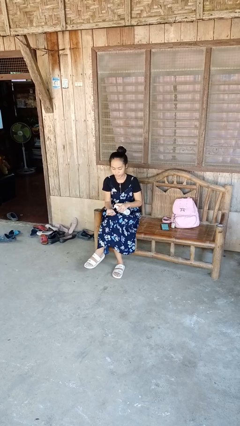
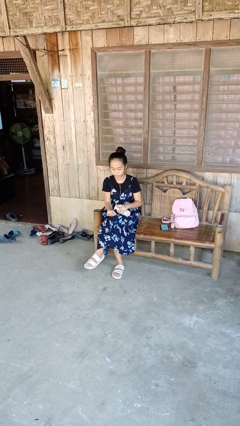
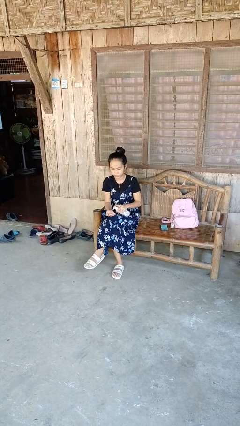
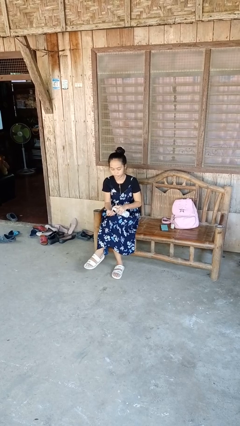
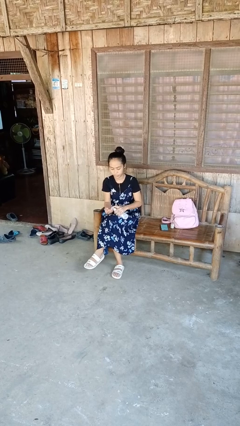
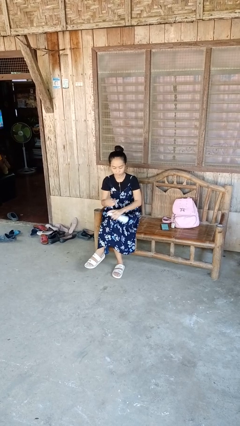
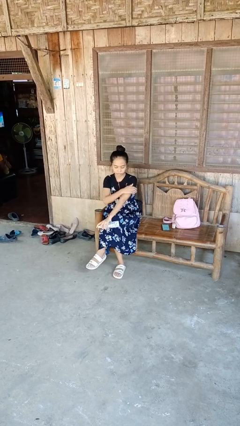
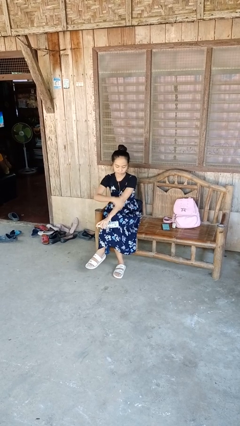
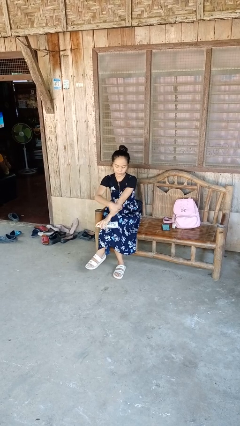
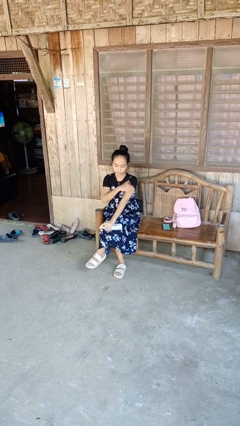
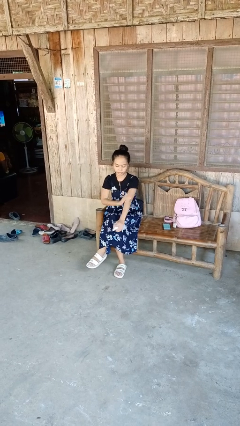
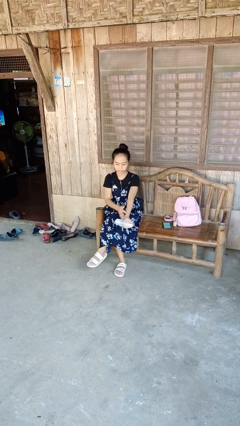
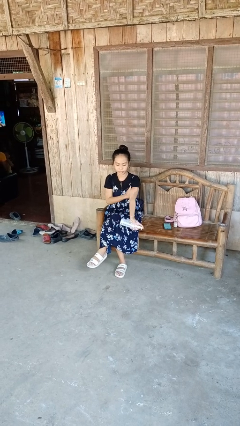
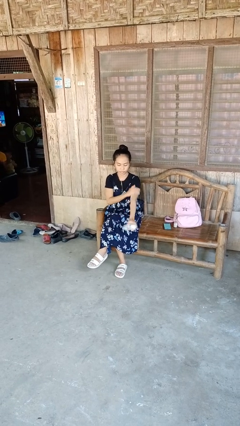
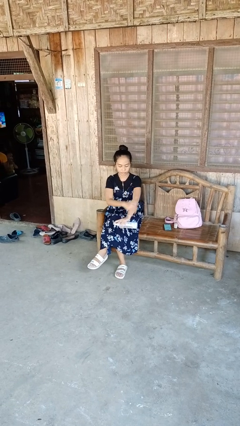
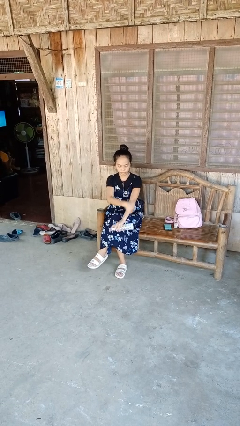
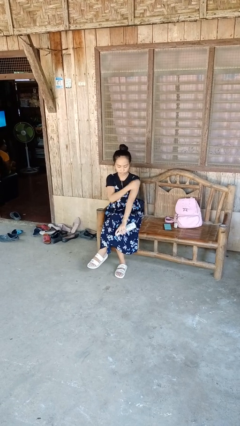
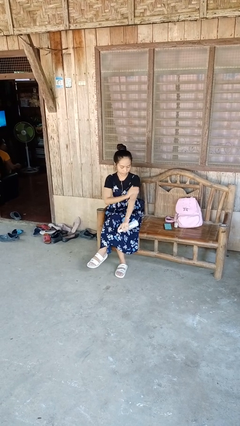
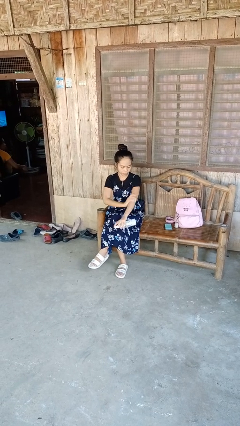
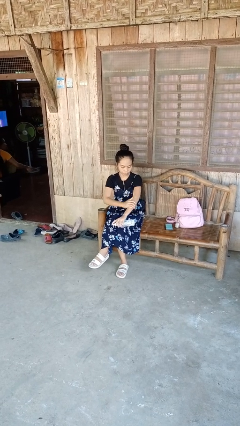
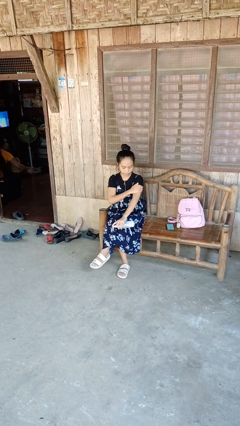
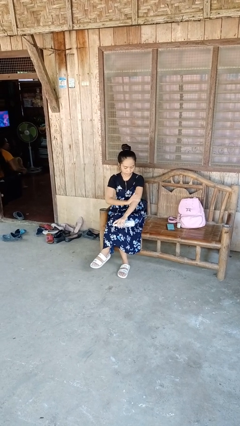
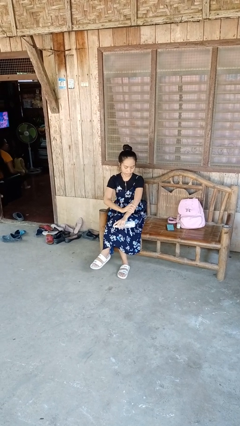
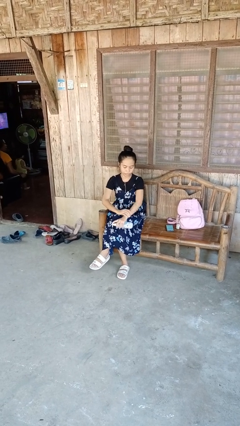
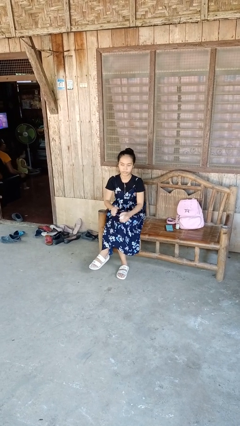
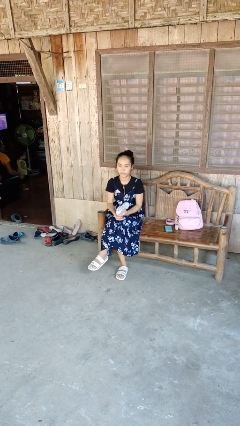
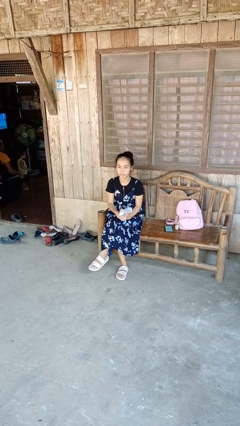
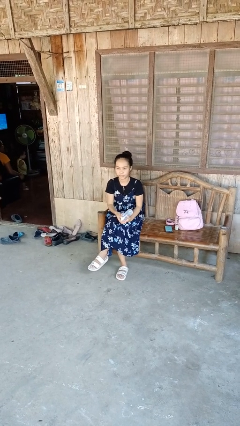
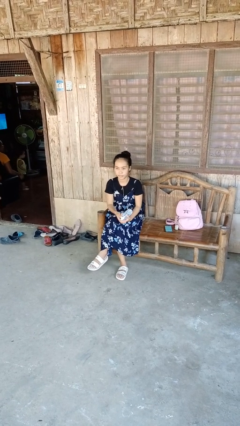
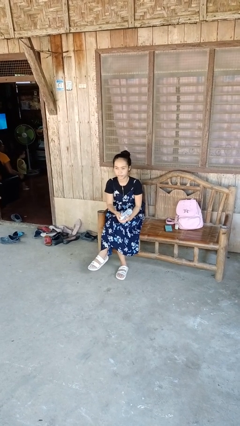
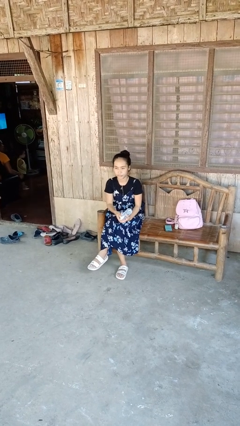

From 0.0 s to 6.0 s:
person applies sunscreen

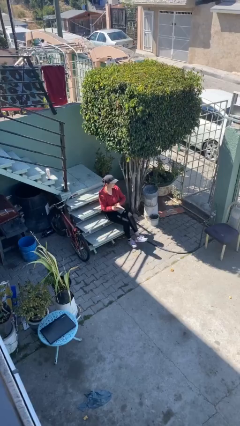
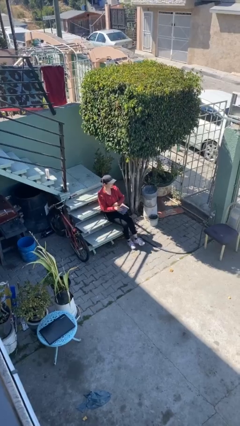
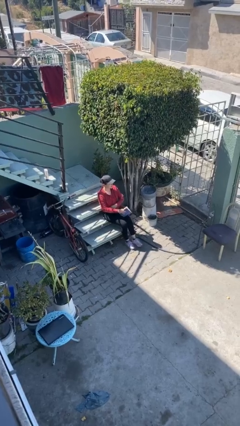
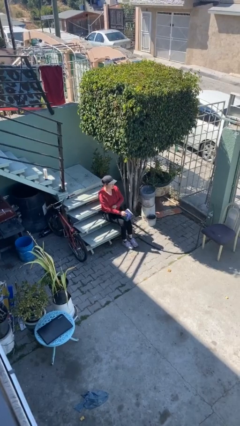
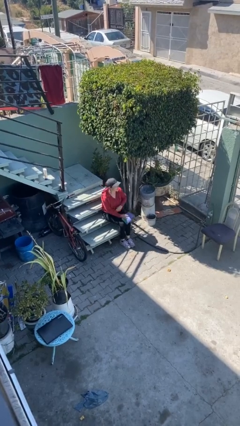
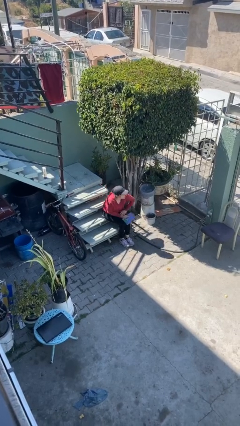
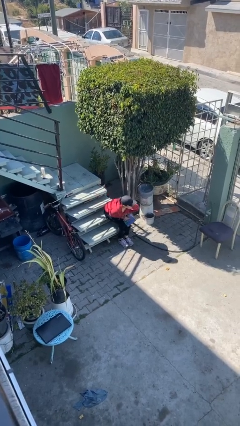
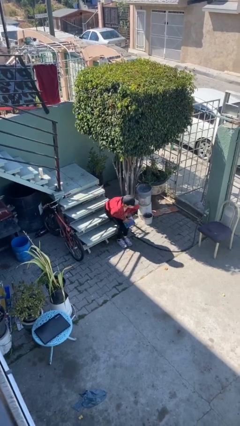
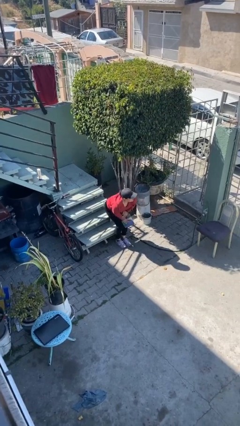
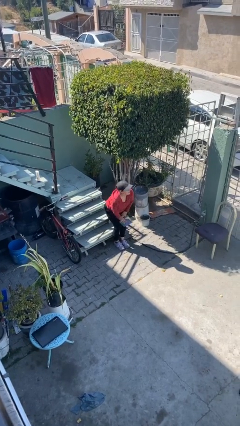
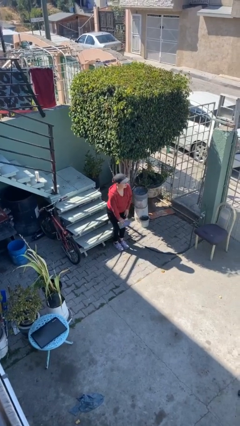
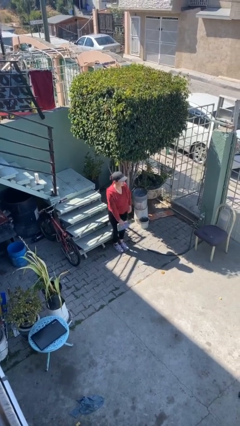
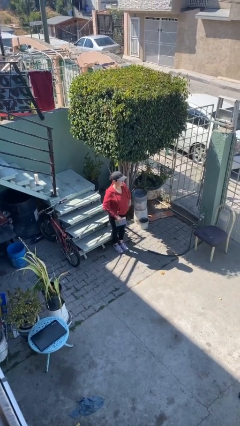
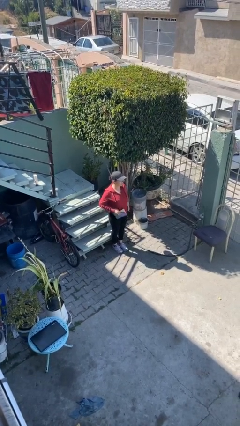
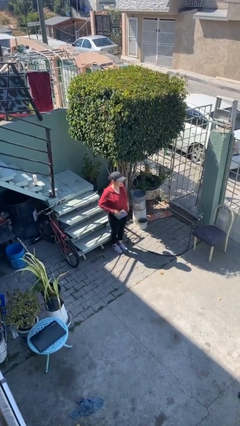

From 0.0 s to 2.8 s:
person stands up

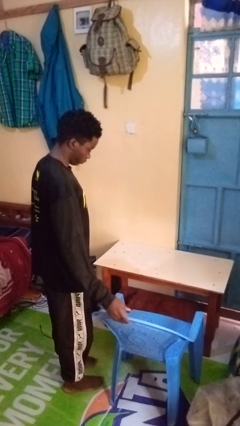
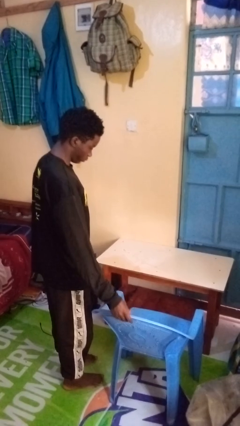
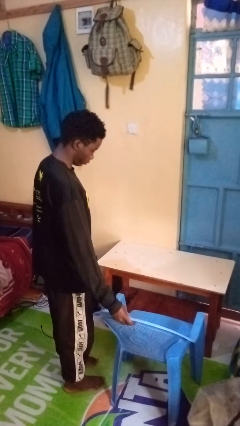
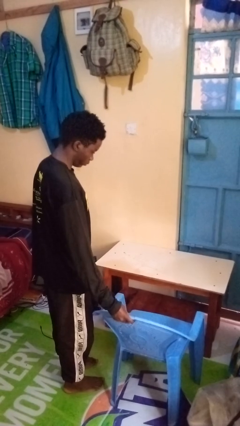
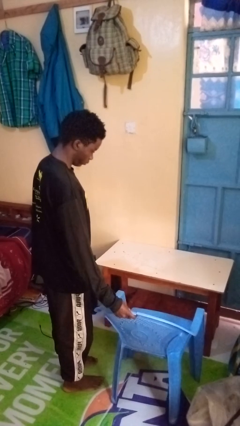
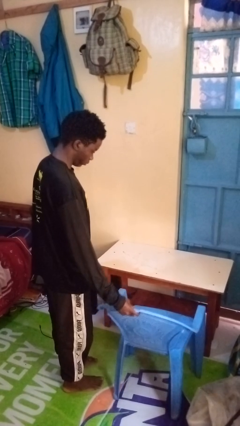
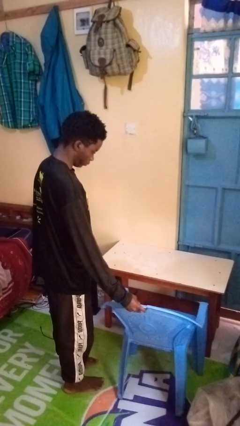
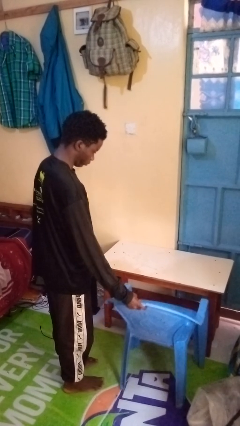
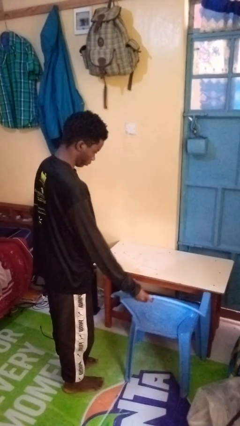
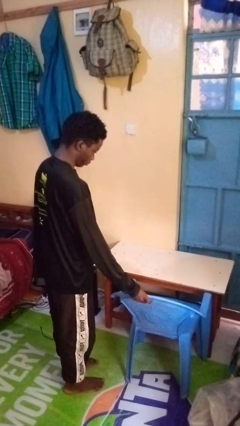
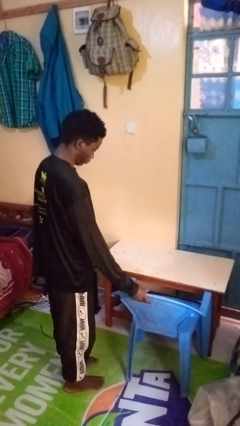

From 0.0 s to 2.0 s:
person pushes in chair

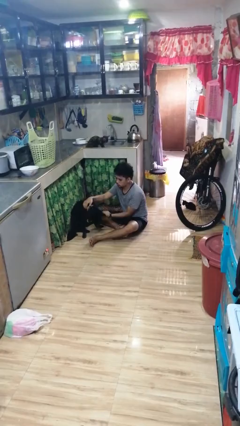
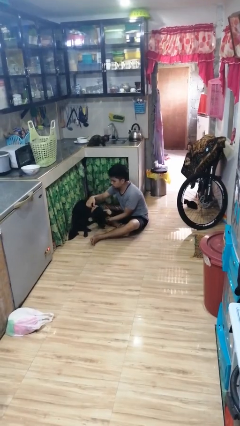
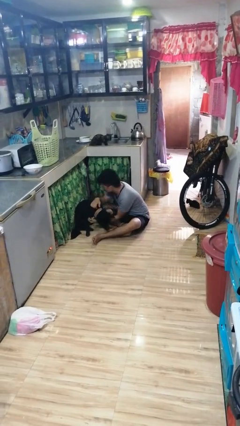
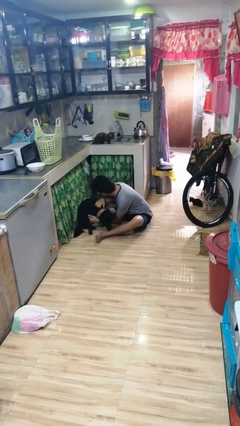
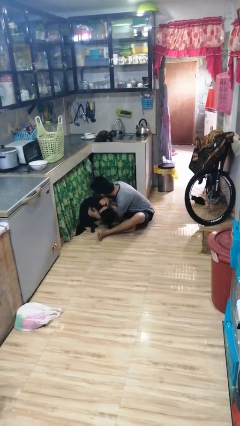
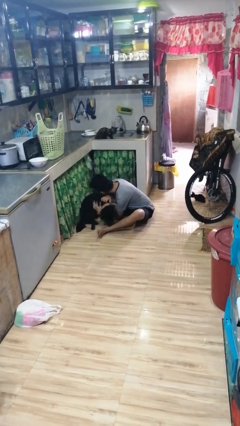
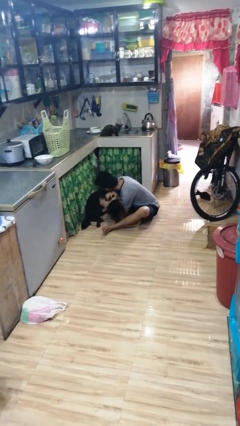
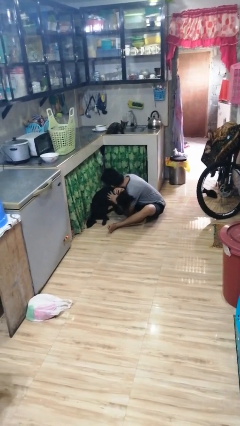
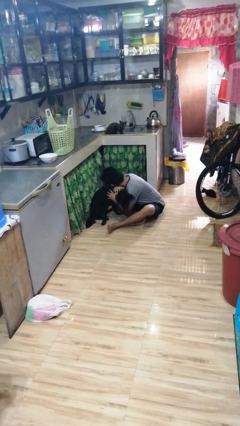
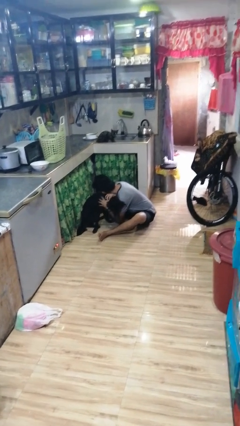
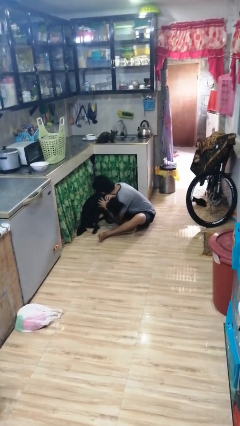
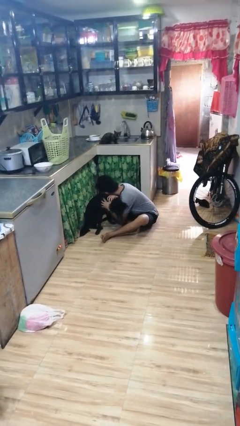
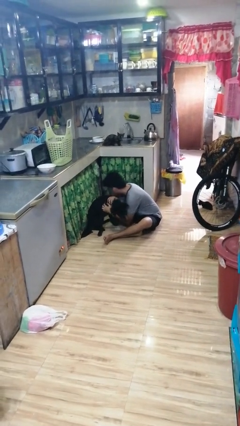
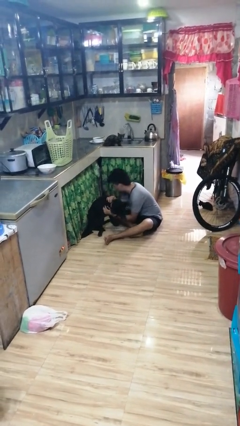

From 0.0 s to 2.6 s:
person hugs dog

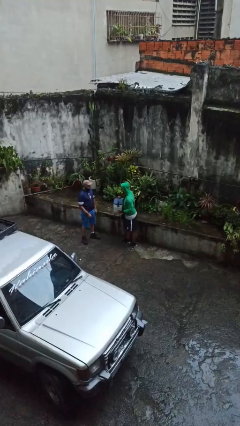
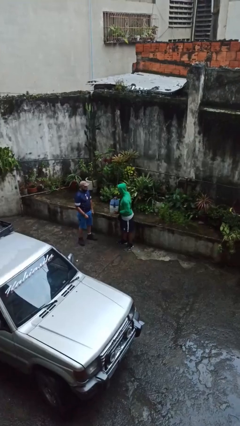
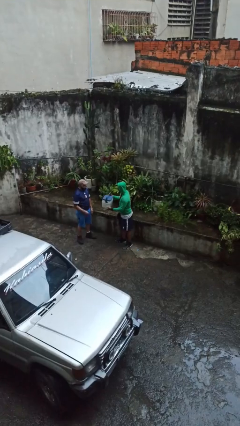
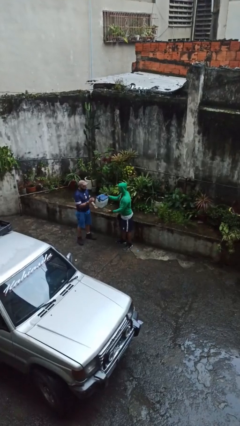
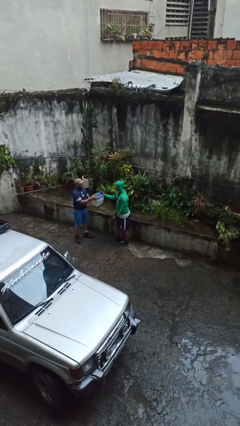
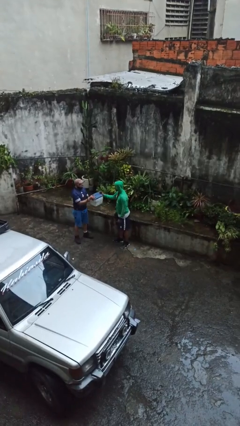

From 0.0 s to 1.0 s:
person transfers object to person

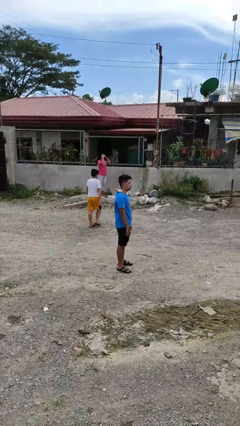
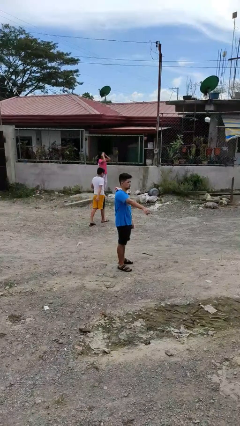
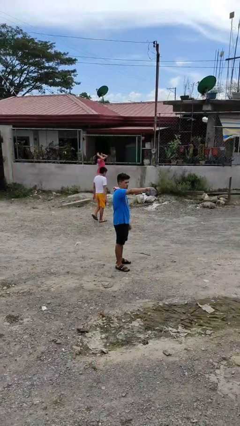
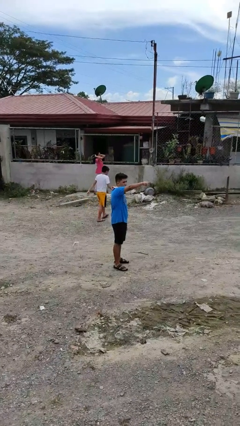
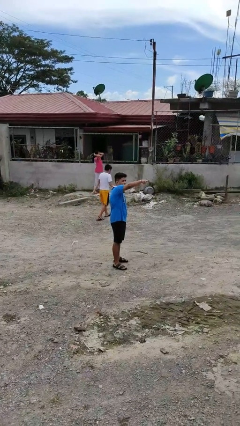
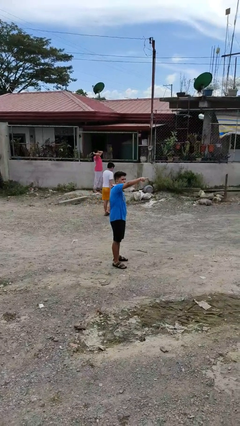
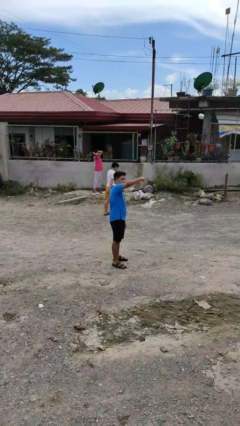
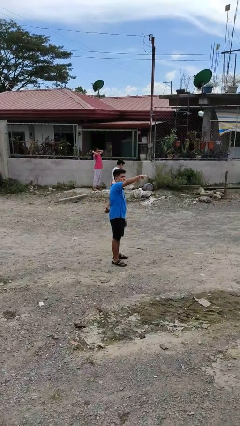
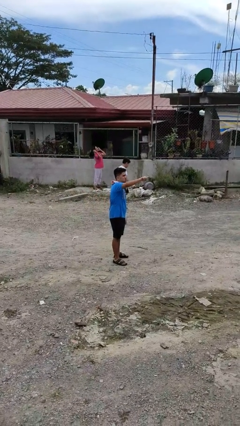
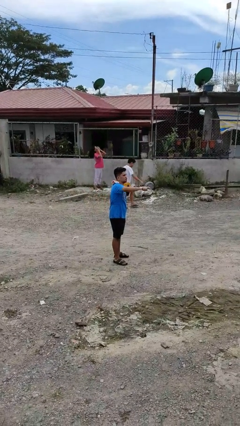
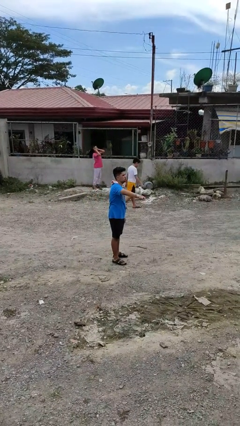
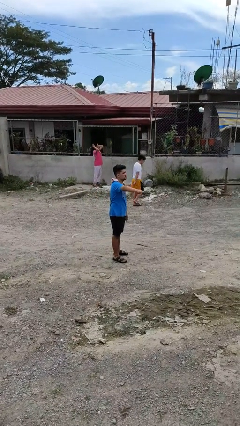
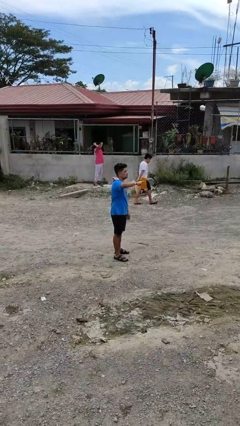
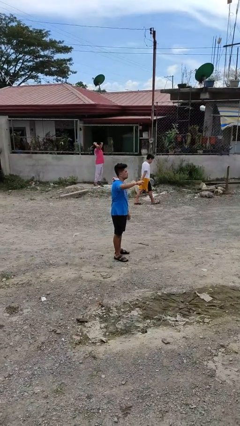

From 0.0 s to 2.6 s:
person points at person

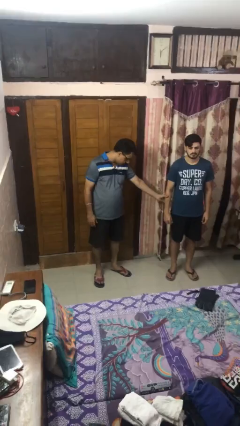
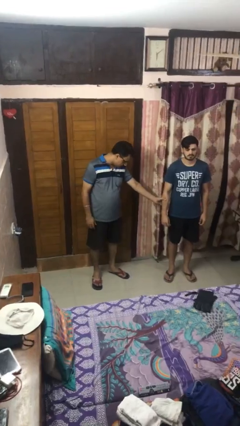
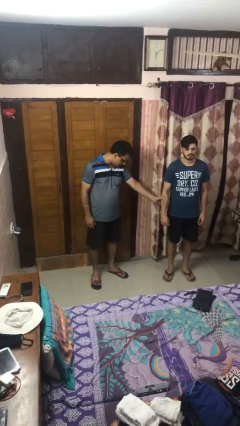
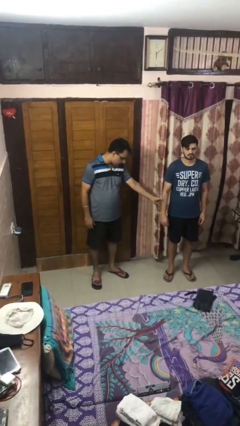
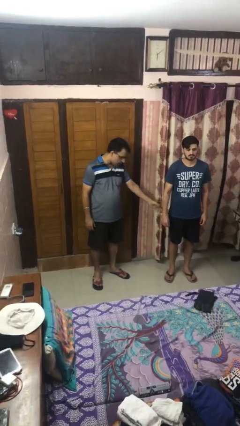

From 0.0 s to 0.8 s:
person grabs person by forearm
